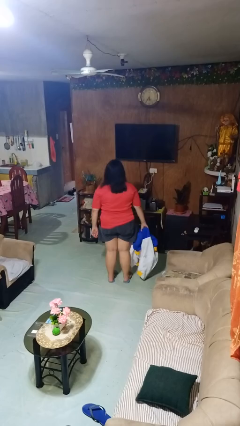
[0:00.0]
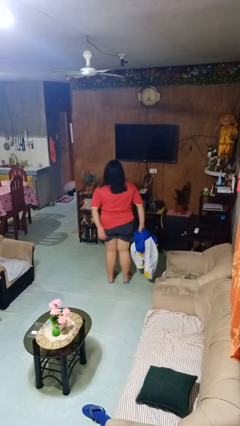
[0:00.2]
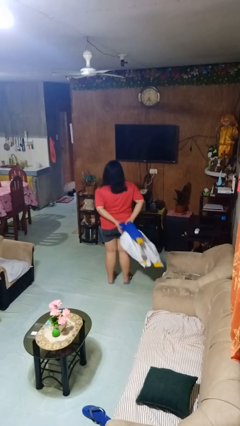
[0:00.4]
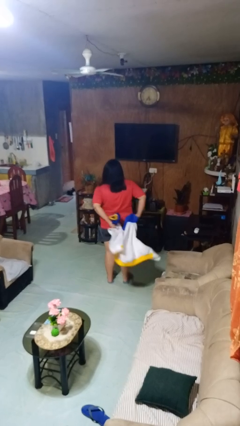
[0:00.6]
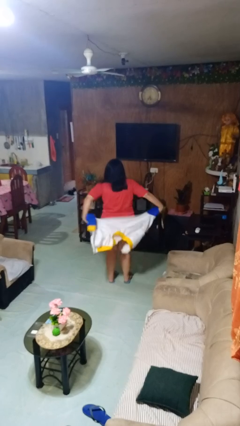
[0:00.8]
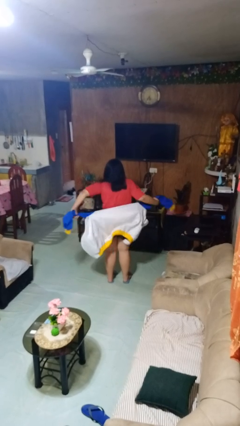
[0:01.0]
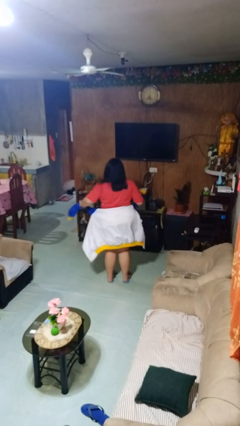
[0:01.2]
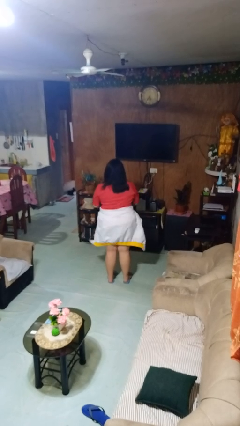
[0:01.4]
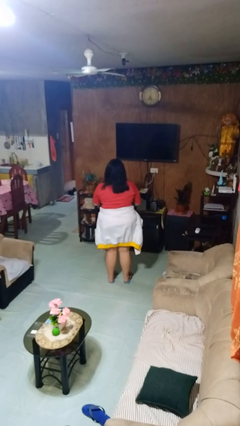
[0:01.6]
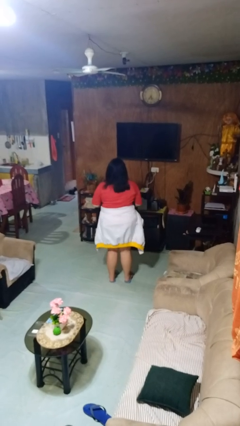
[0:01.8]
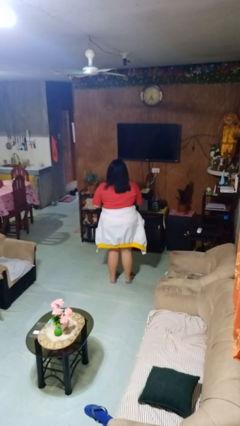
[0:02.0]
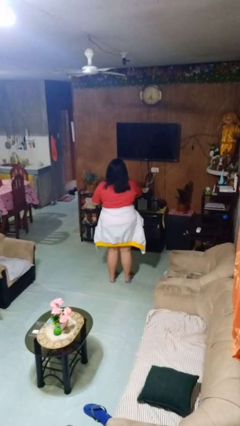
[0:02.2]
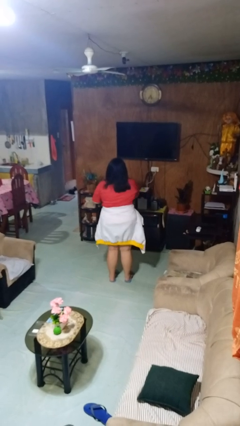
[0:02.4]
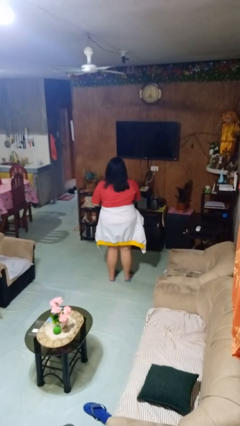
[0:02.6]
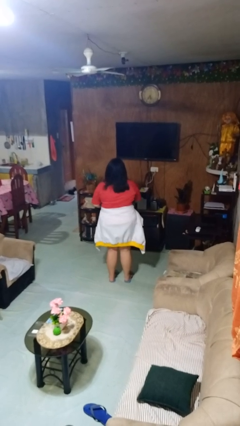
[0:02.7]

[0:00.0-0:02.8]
person ties jacket around waist

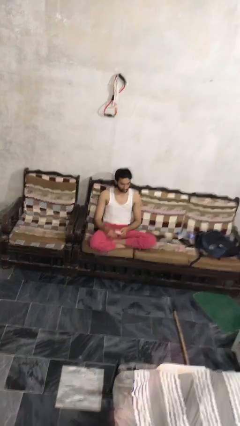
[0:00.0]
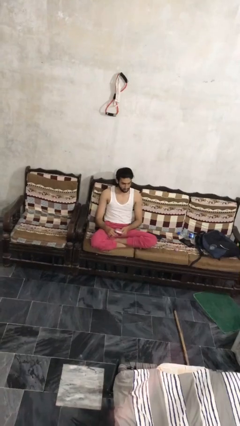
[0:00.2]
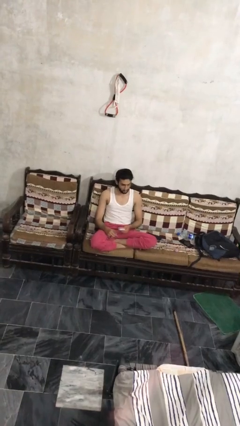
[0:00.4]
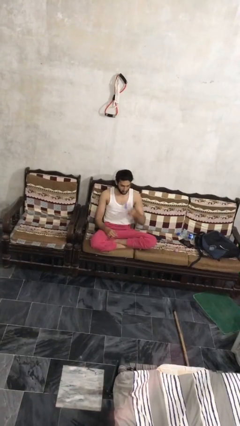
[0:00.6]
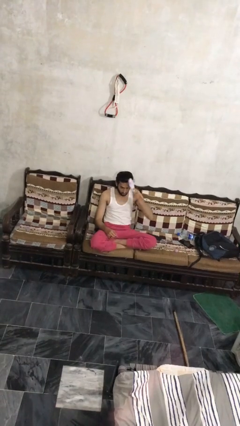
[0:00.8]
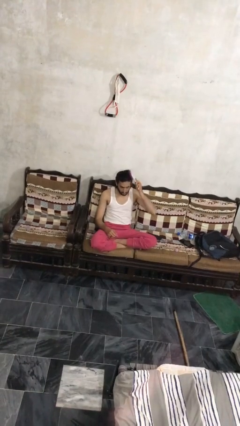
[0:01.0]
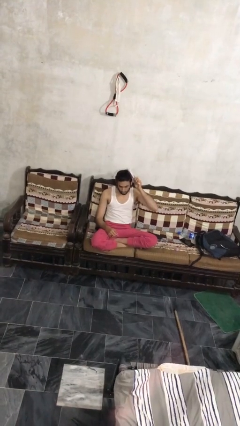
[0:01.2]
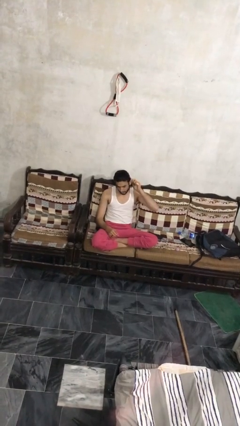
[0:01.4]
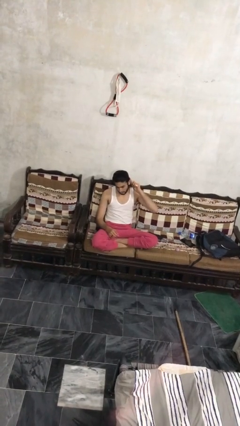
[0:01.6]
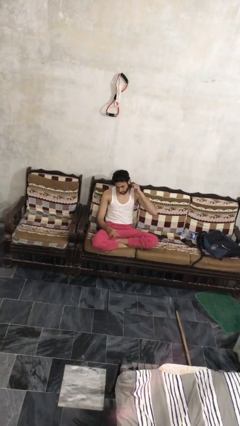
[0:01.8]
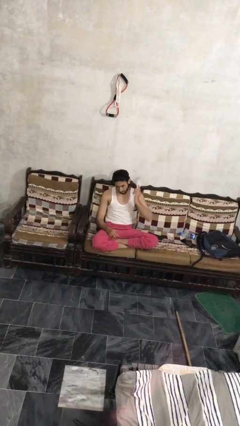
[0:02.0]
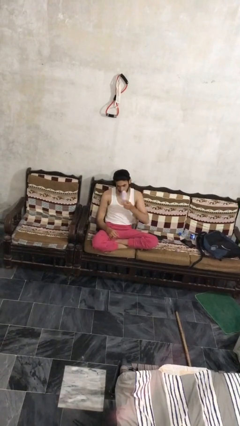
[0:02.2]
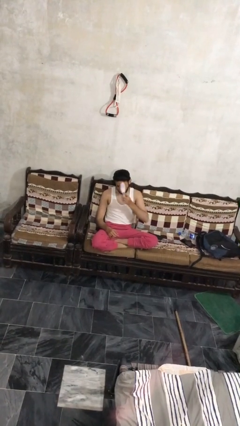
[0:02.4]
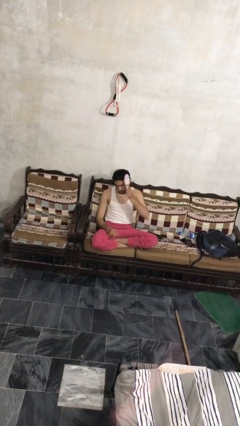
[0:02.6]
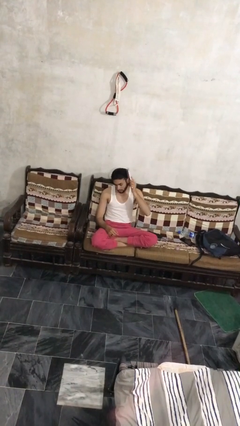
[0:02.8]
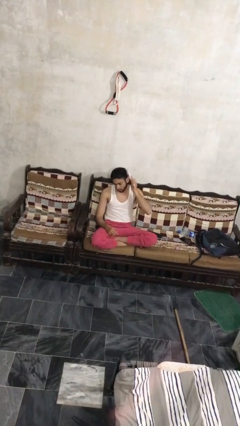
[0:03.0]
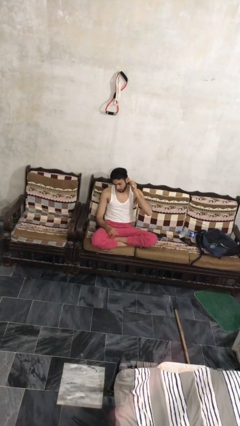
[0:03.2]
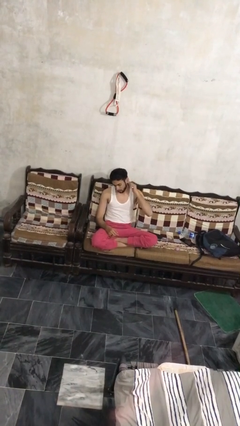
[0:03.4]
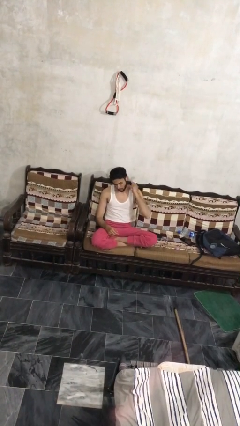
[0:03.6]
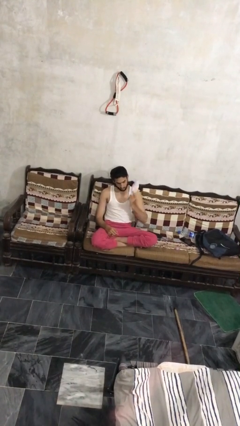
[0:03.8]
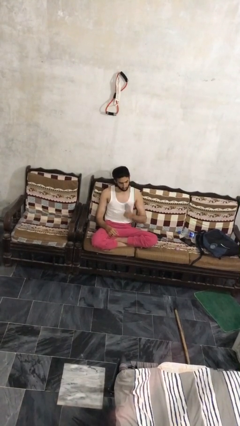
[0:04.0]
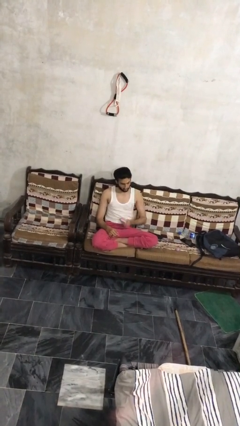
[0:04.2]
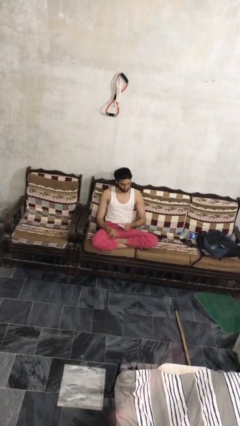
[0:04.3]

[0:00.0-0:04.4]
person brushes hair

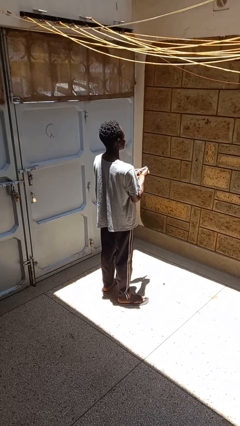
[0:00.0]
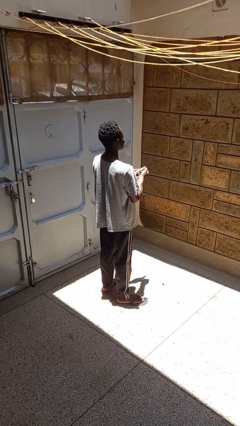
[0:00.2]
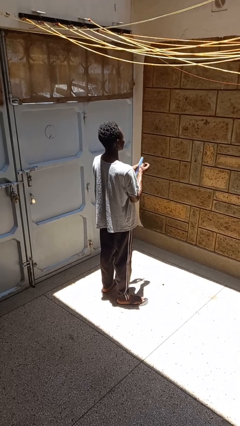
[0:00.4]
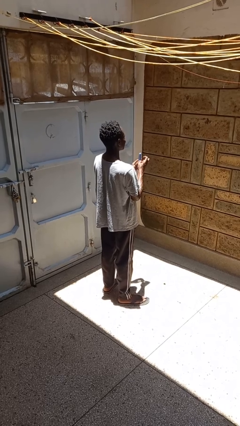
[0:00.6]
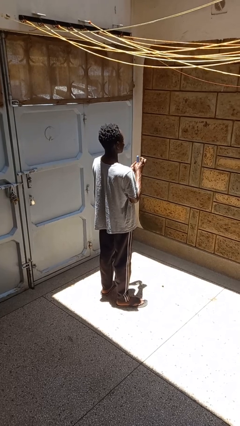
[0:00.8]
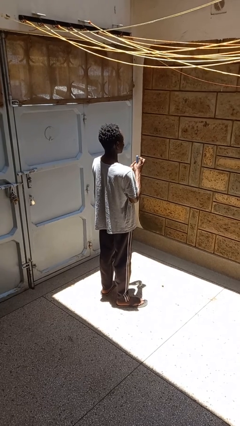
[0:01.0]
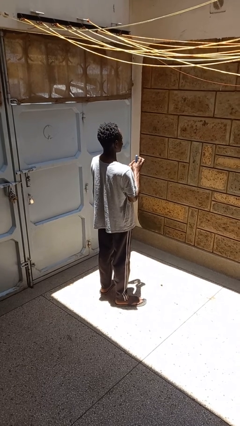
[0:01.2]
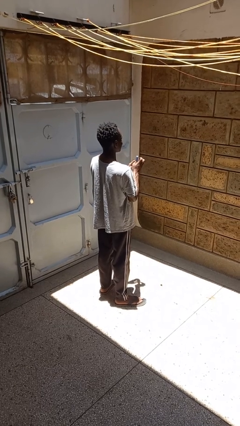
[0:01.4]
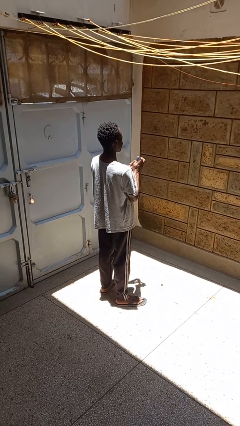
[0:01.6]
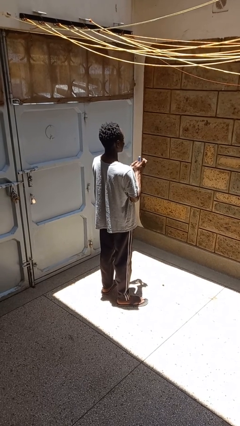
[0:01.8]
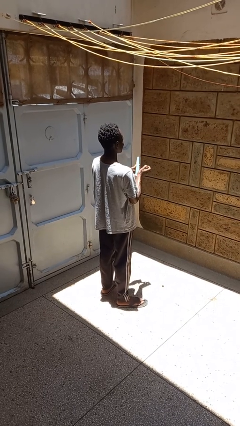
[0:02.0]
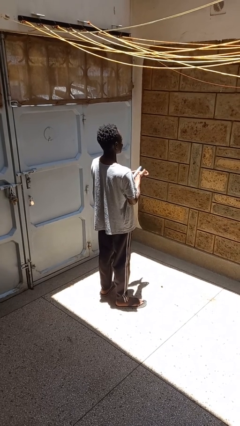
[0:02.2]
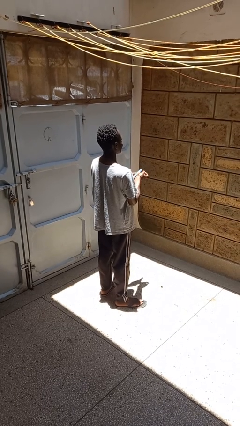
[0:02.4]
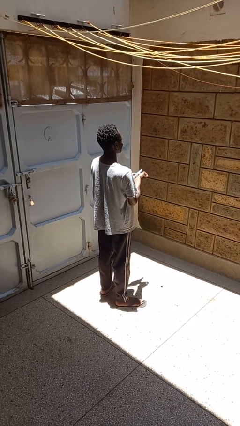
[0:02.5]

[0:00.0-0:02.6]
person files fingernails

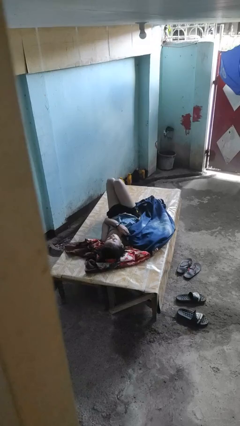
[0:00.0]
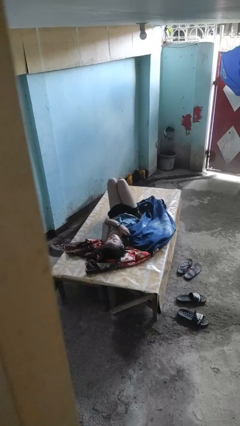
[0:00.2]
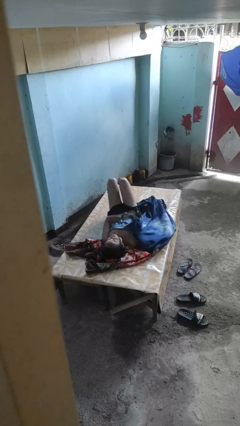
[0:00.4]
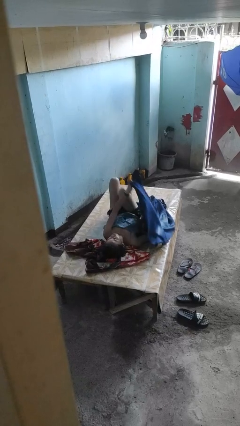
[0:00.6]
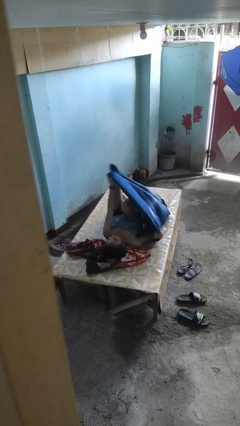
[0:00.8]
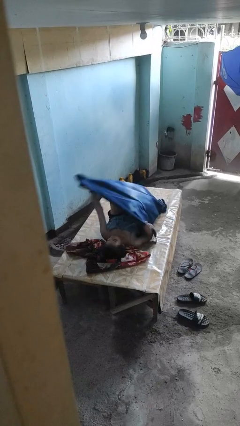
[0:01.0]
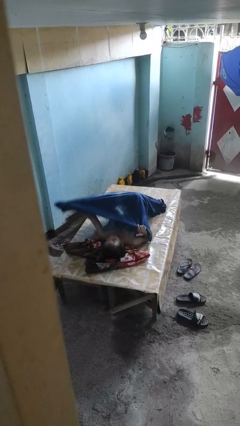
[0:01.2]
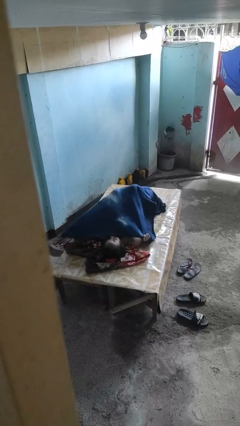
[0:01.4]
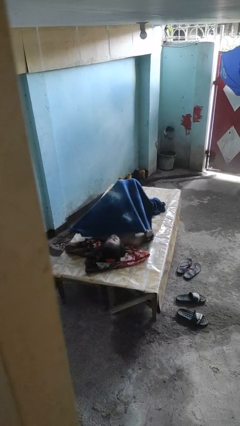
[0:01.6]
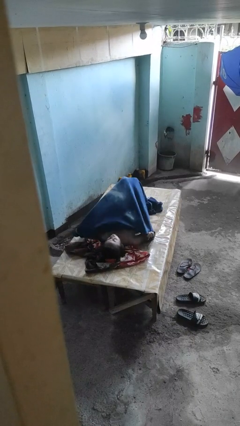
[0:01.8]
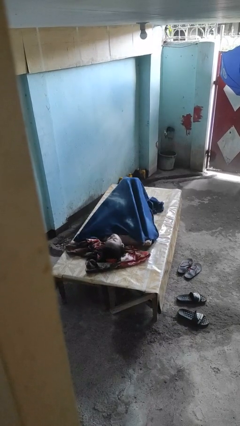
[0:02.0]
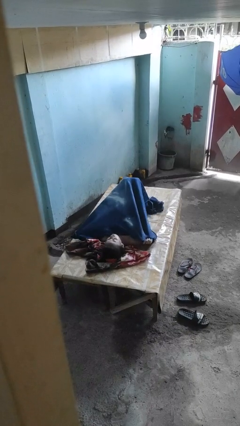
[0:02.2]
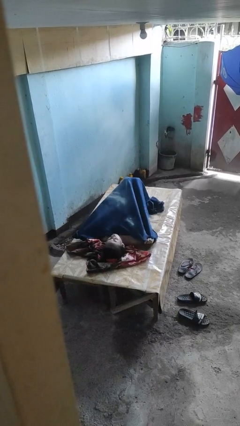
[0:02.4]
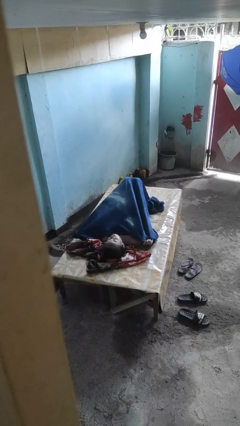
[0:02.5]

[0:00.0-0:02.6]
person covers with bedsheets

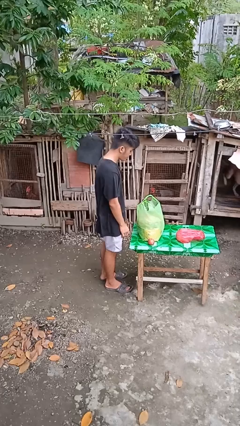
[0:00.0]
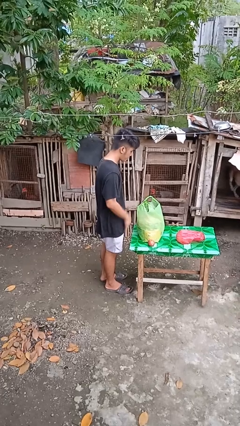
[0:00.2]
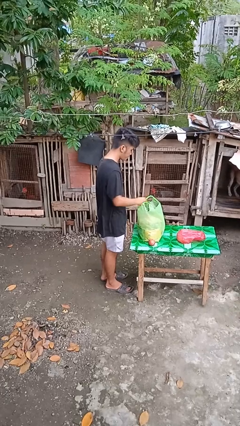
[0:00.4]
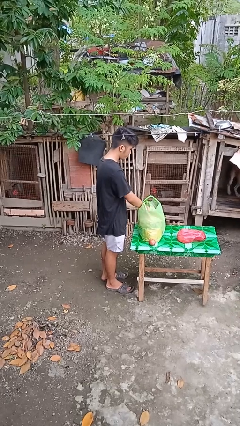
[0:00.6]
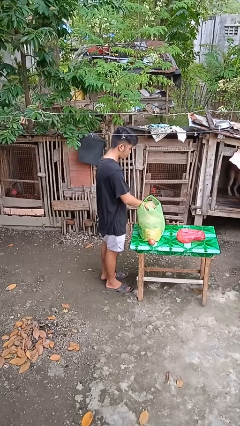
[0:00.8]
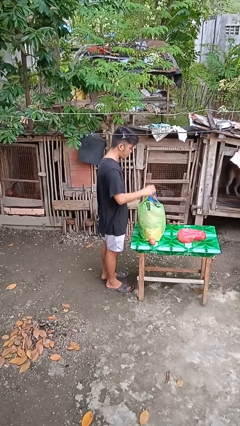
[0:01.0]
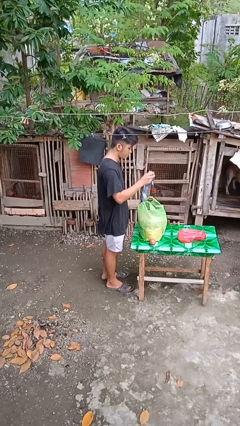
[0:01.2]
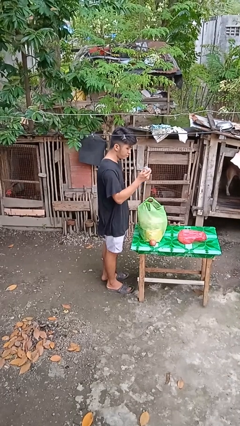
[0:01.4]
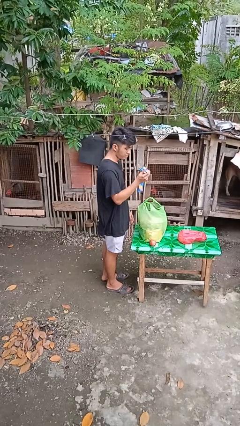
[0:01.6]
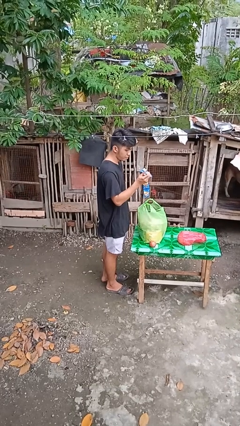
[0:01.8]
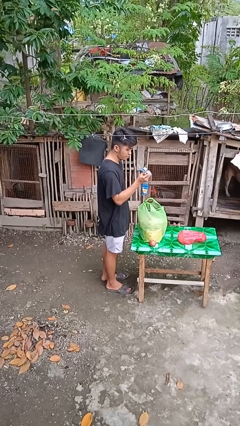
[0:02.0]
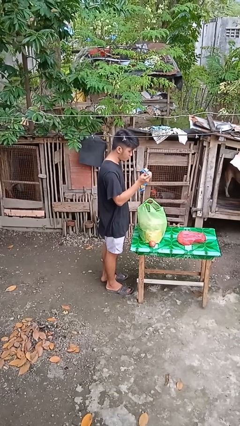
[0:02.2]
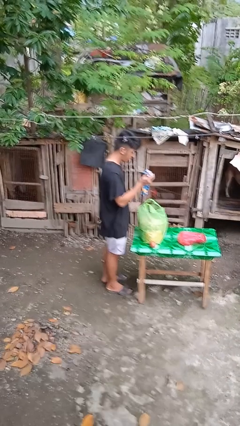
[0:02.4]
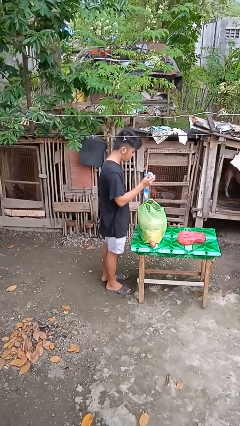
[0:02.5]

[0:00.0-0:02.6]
person takes object from bag

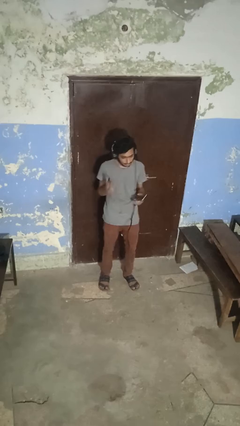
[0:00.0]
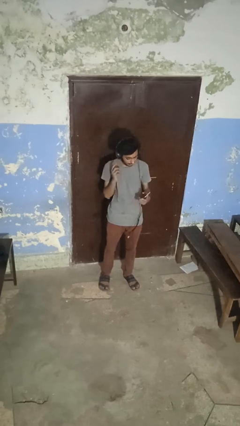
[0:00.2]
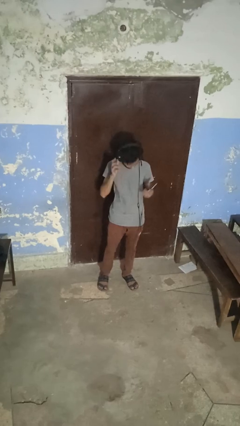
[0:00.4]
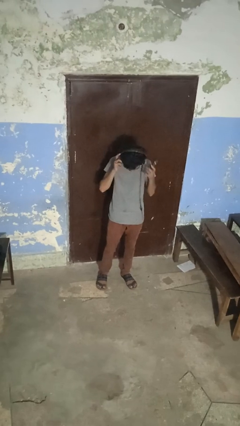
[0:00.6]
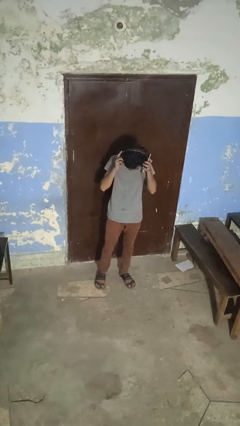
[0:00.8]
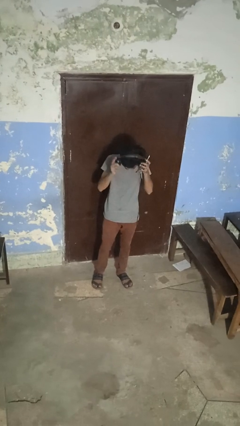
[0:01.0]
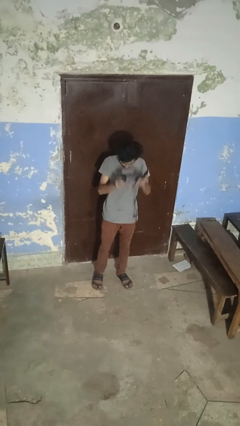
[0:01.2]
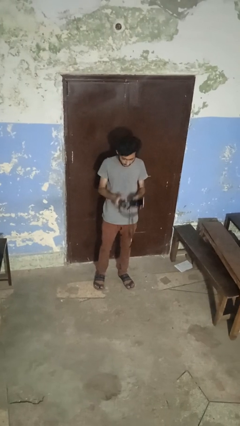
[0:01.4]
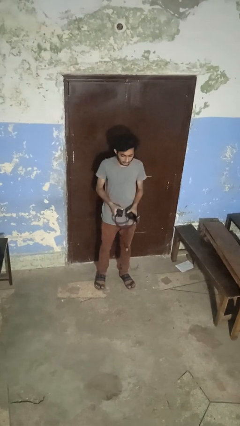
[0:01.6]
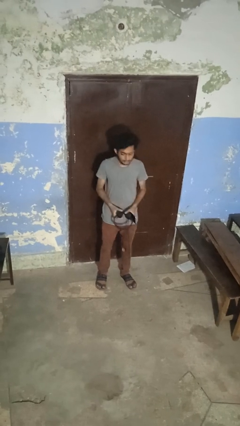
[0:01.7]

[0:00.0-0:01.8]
person takes off headphones

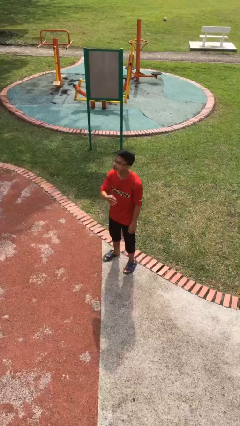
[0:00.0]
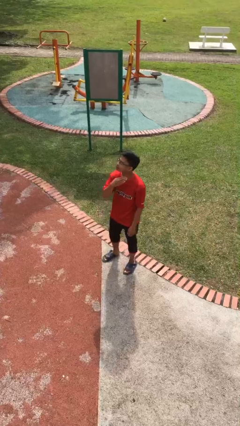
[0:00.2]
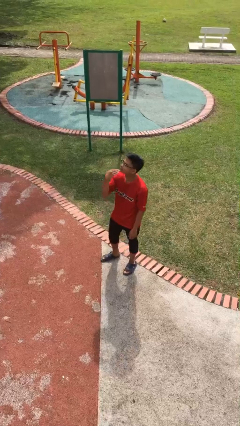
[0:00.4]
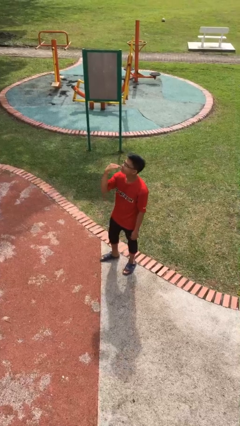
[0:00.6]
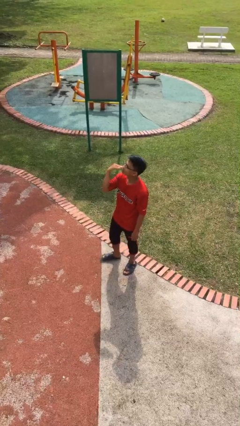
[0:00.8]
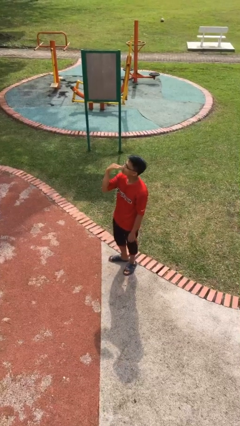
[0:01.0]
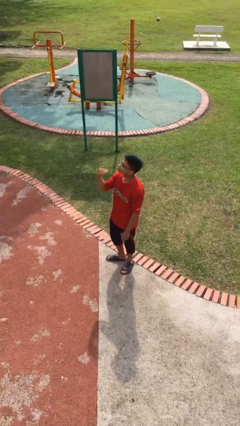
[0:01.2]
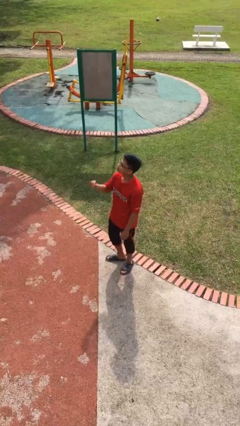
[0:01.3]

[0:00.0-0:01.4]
person gestures cut
